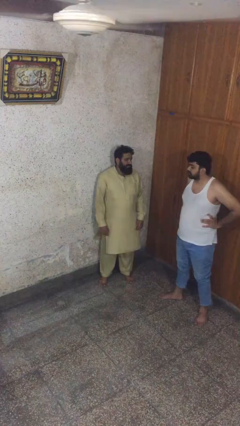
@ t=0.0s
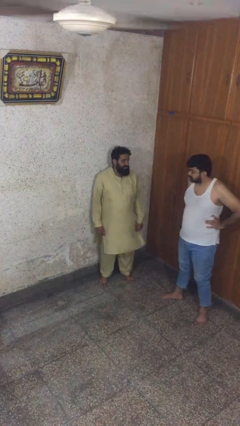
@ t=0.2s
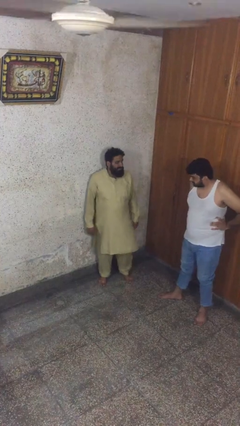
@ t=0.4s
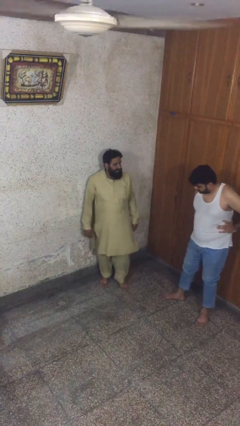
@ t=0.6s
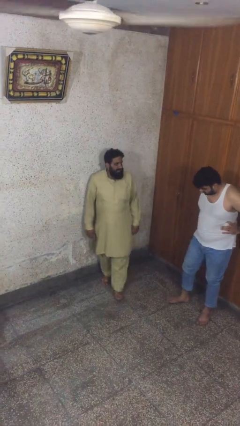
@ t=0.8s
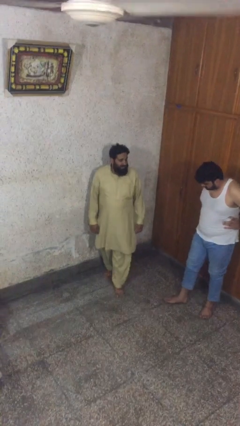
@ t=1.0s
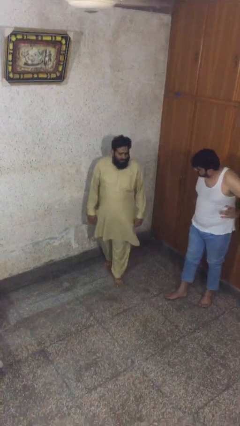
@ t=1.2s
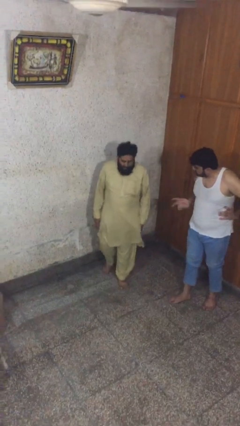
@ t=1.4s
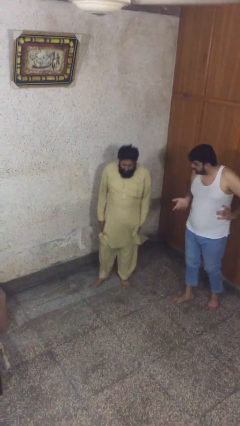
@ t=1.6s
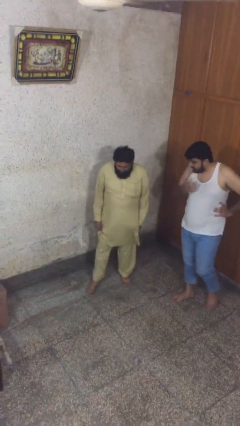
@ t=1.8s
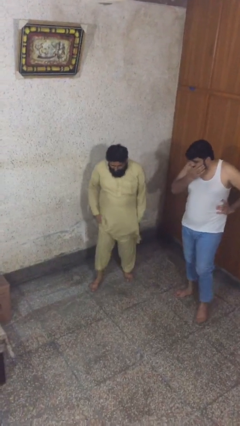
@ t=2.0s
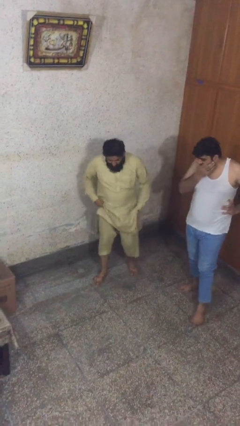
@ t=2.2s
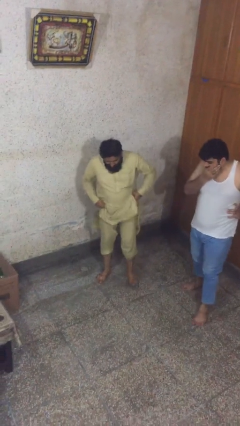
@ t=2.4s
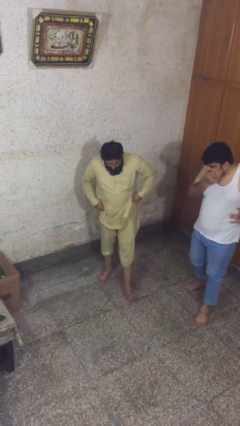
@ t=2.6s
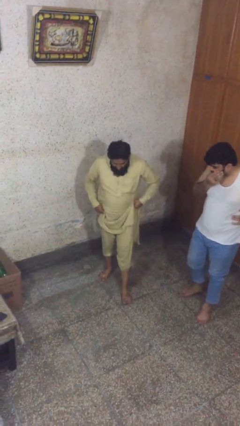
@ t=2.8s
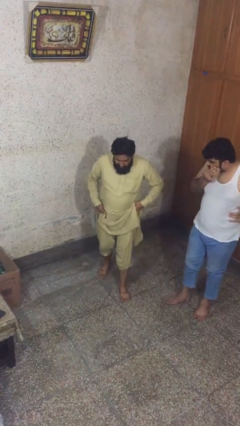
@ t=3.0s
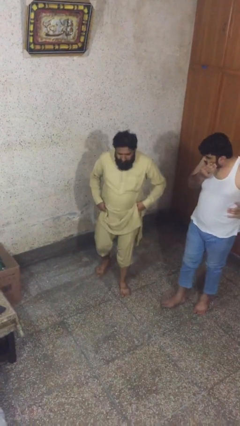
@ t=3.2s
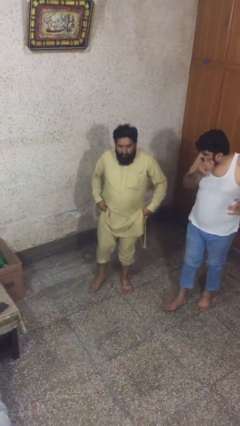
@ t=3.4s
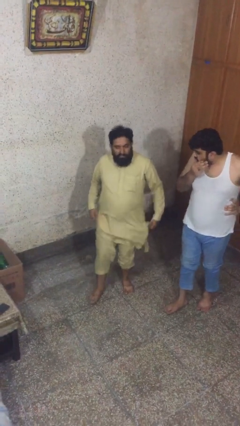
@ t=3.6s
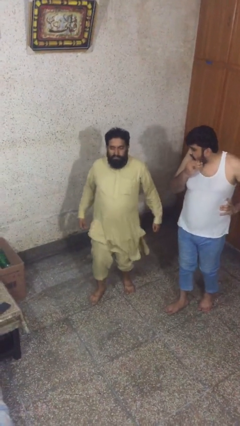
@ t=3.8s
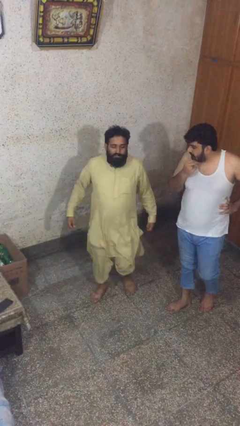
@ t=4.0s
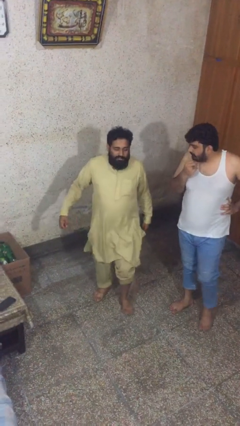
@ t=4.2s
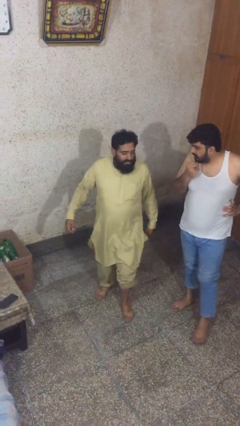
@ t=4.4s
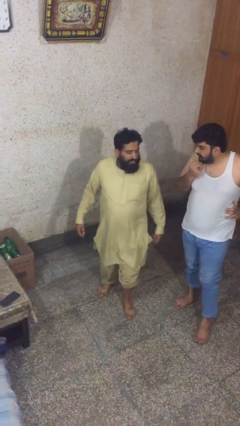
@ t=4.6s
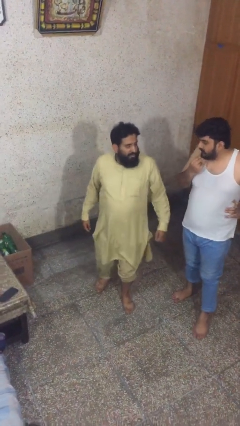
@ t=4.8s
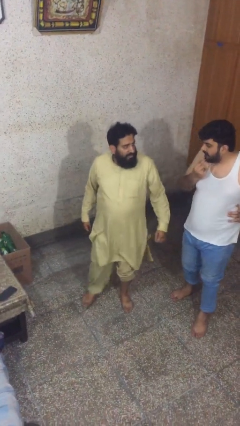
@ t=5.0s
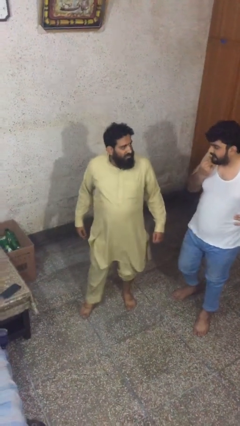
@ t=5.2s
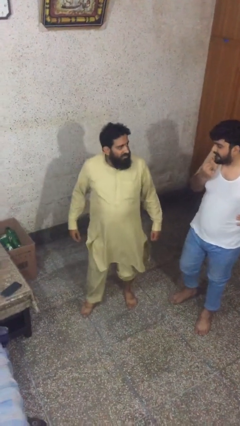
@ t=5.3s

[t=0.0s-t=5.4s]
person talks to person

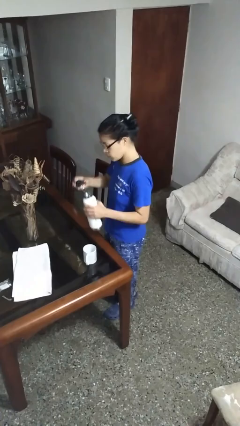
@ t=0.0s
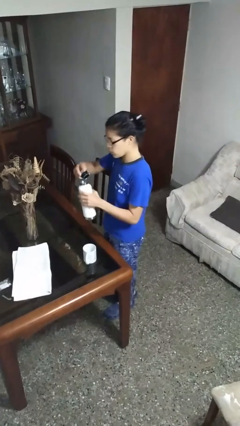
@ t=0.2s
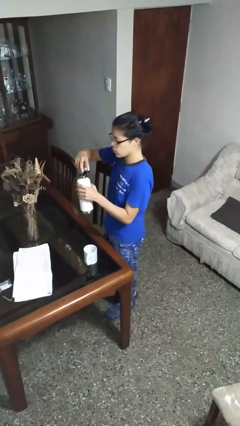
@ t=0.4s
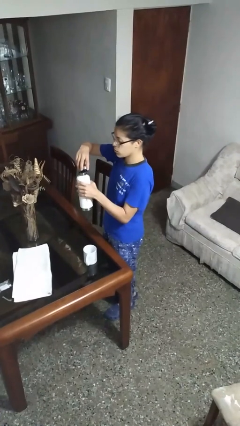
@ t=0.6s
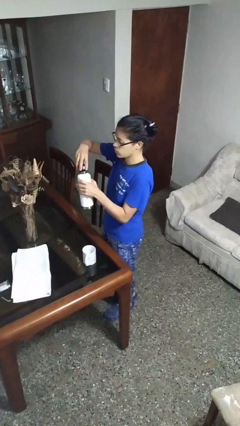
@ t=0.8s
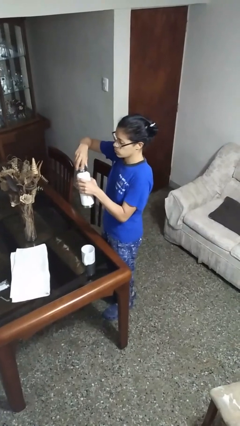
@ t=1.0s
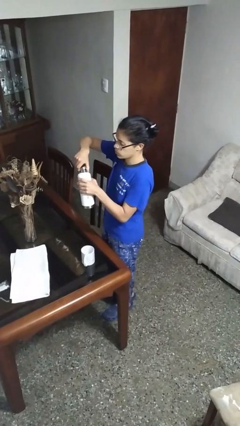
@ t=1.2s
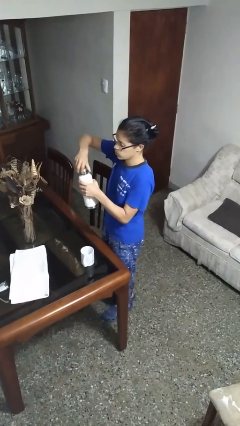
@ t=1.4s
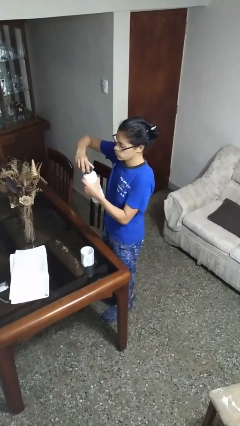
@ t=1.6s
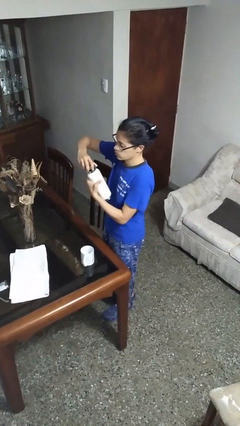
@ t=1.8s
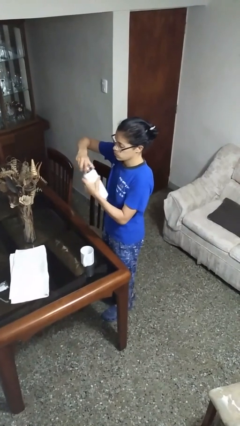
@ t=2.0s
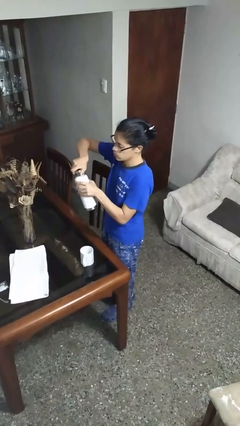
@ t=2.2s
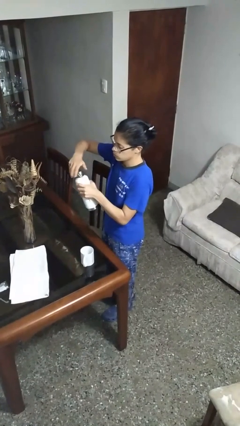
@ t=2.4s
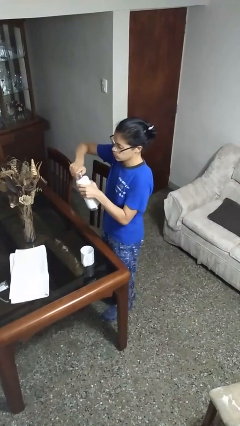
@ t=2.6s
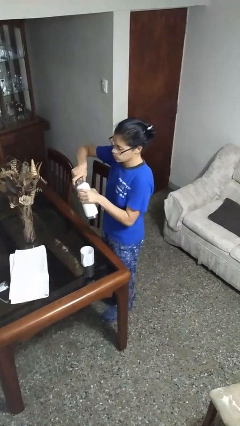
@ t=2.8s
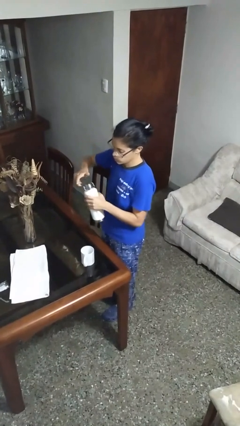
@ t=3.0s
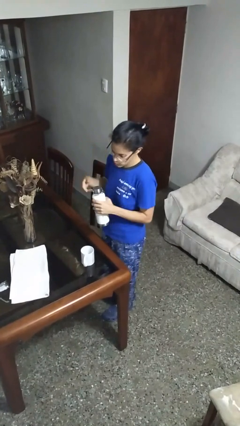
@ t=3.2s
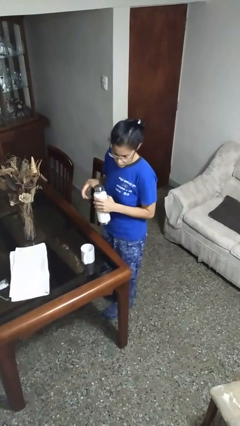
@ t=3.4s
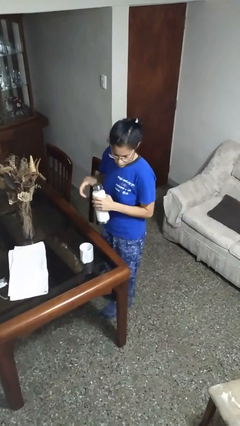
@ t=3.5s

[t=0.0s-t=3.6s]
person screws lid to bottle

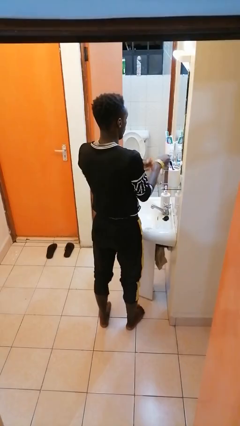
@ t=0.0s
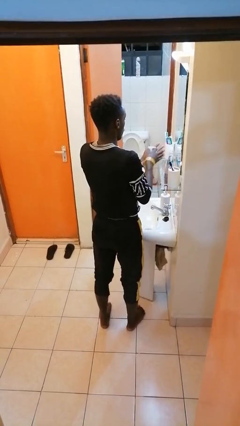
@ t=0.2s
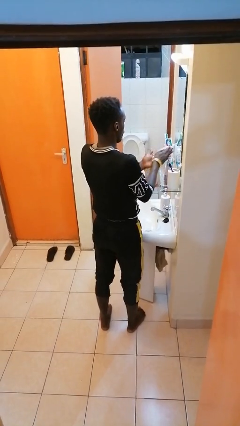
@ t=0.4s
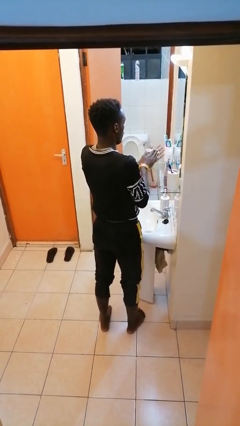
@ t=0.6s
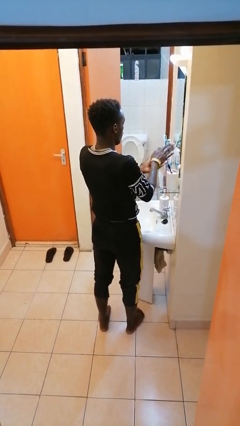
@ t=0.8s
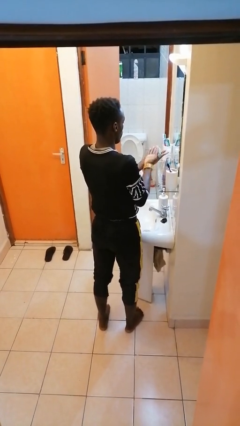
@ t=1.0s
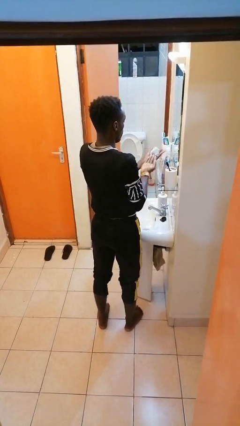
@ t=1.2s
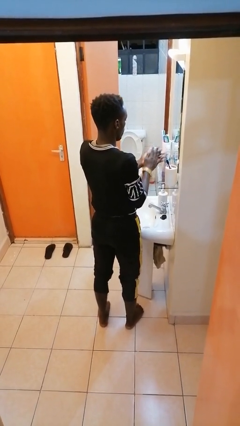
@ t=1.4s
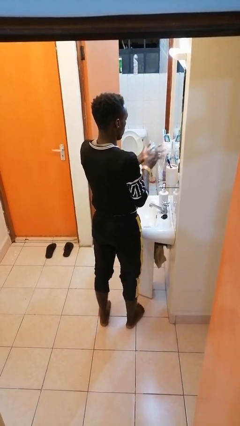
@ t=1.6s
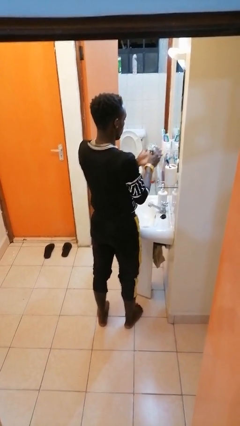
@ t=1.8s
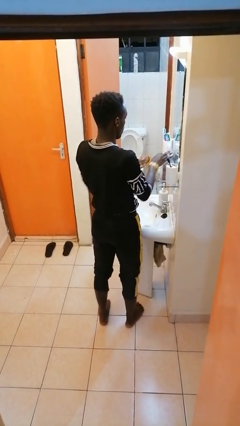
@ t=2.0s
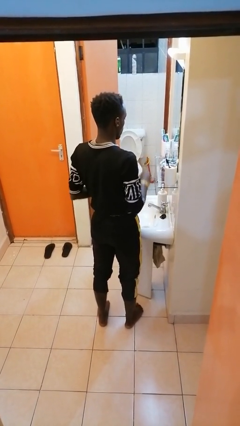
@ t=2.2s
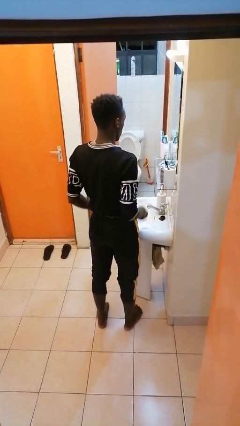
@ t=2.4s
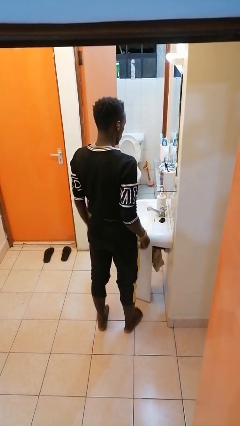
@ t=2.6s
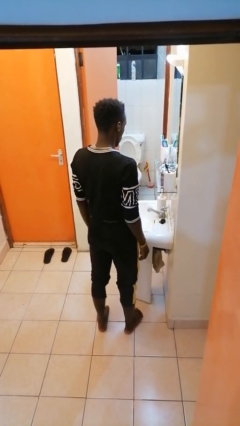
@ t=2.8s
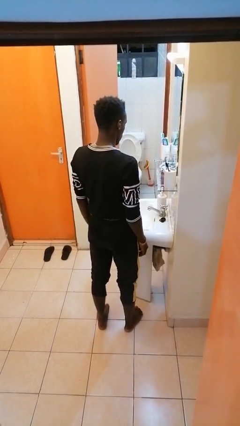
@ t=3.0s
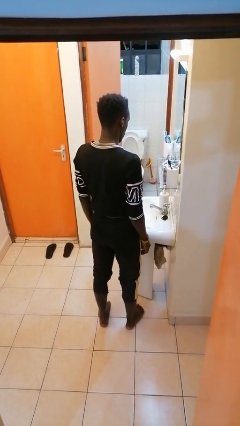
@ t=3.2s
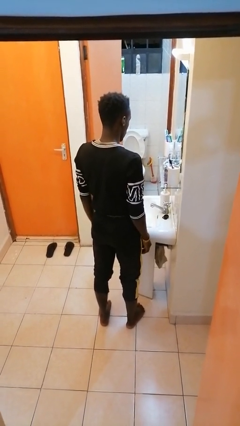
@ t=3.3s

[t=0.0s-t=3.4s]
person dries hands with towel

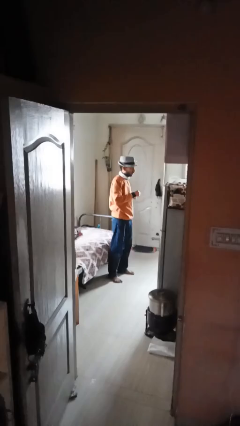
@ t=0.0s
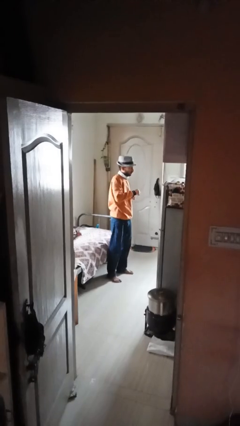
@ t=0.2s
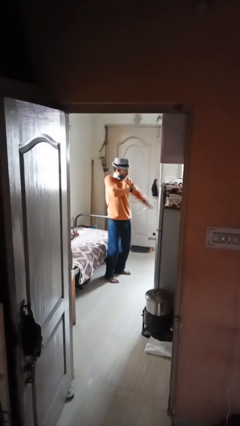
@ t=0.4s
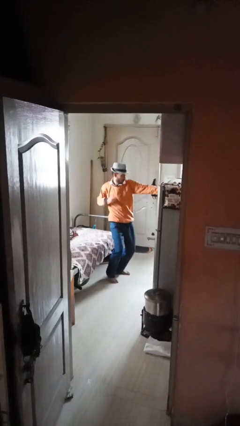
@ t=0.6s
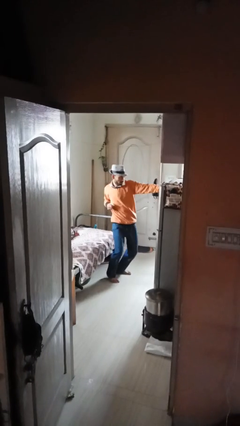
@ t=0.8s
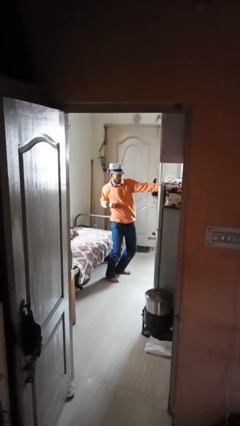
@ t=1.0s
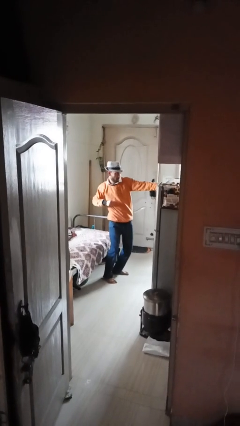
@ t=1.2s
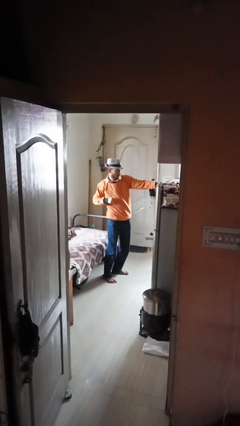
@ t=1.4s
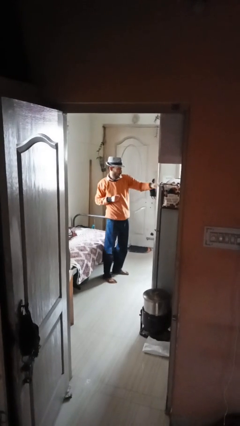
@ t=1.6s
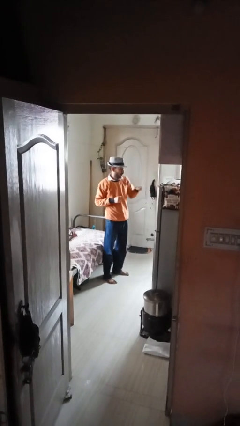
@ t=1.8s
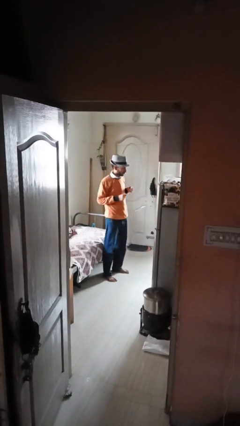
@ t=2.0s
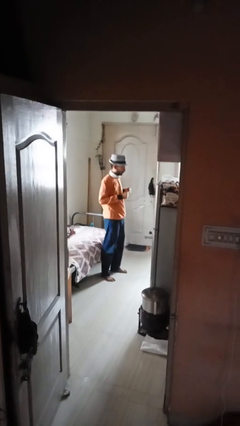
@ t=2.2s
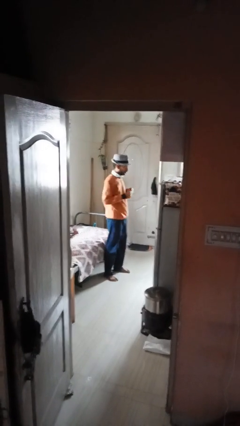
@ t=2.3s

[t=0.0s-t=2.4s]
person punches

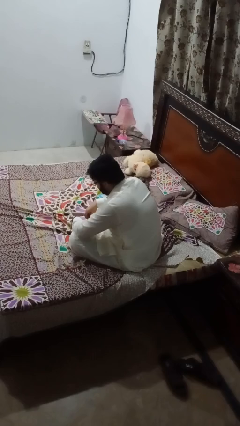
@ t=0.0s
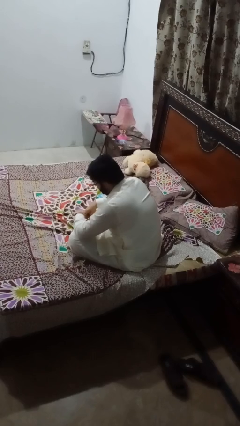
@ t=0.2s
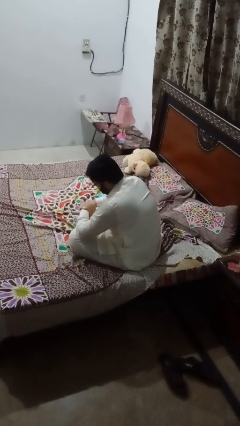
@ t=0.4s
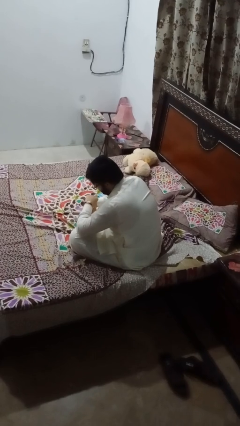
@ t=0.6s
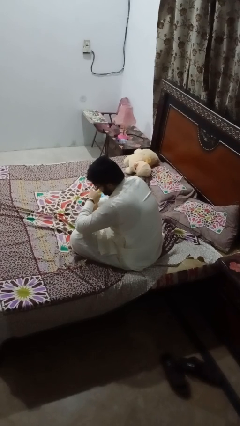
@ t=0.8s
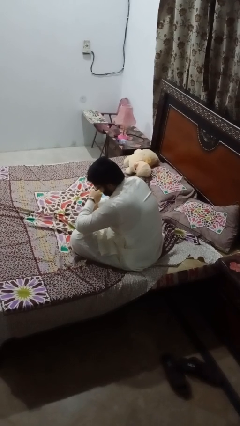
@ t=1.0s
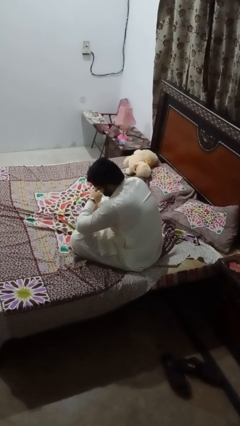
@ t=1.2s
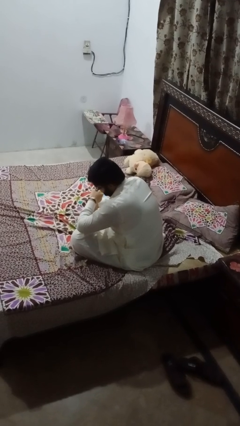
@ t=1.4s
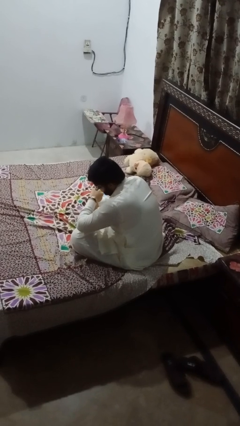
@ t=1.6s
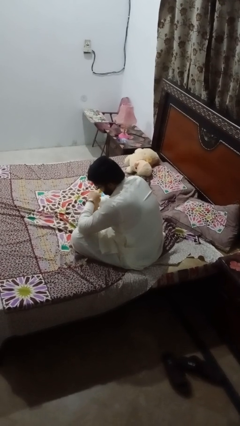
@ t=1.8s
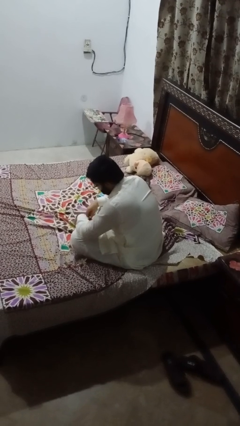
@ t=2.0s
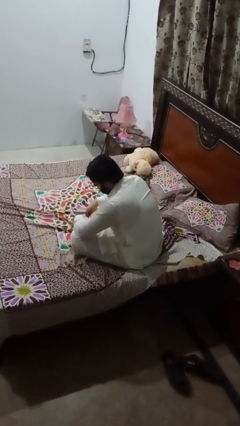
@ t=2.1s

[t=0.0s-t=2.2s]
person looks at wristwatch

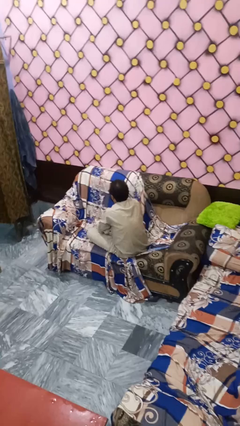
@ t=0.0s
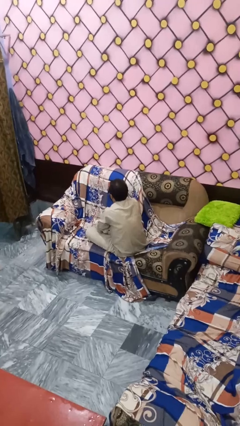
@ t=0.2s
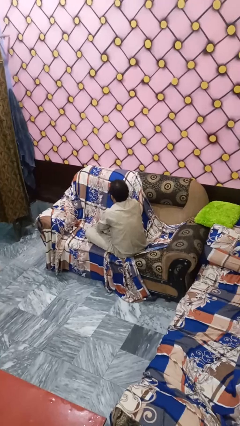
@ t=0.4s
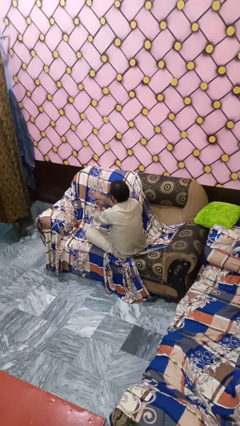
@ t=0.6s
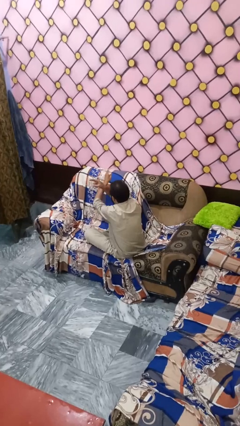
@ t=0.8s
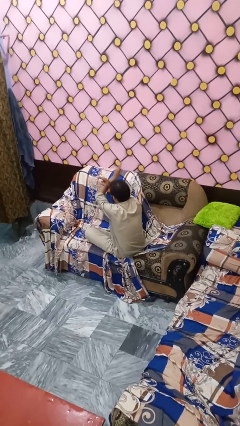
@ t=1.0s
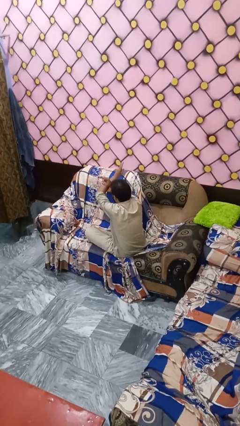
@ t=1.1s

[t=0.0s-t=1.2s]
person gestures cut
